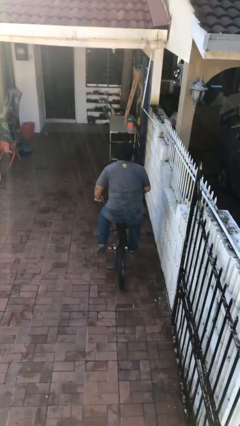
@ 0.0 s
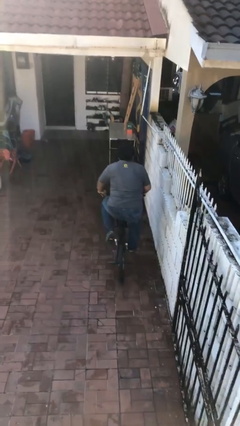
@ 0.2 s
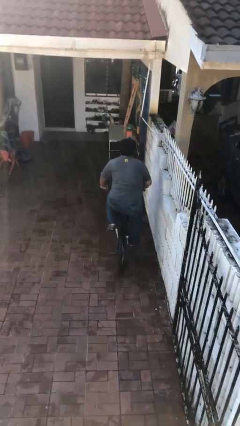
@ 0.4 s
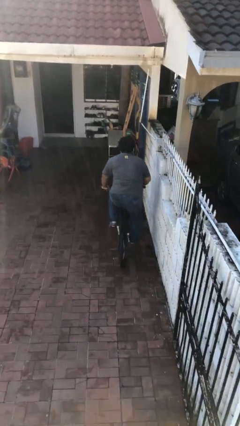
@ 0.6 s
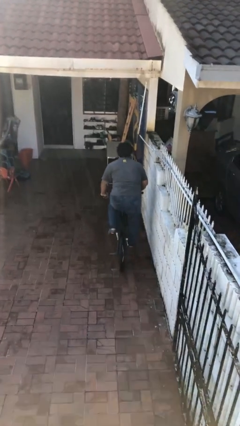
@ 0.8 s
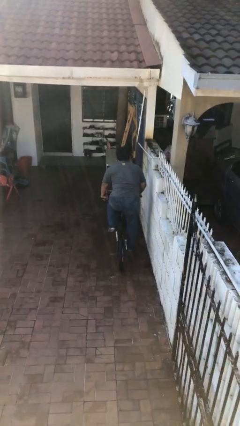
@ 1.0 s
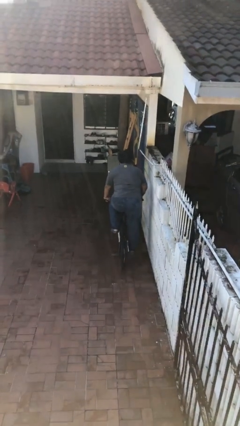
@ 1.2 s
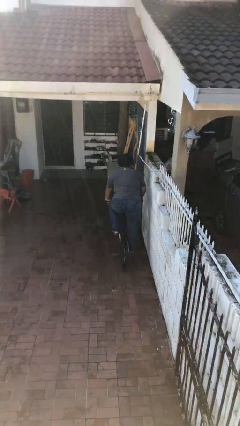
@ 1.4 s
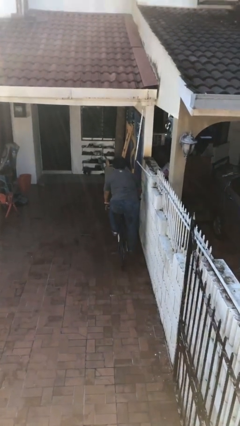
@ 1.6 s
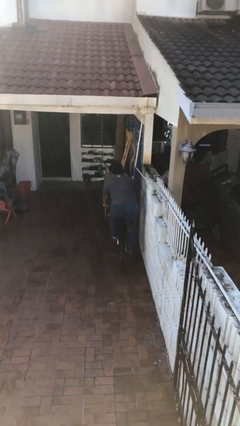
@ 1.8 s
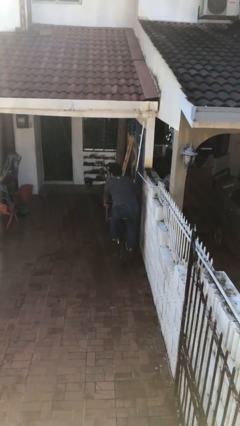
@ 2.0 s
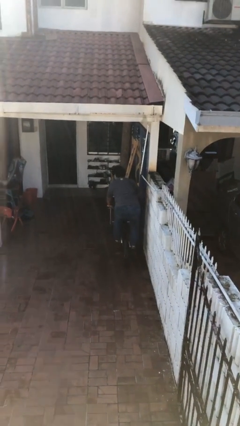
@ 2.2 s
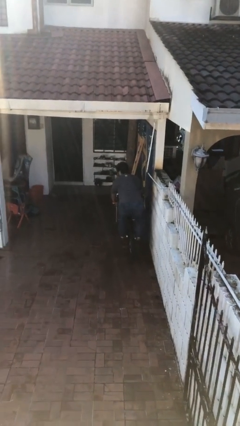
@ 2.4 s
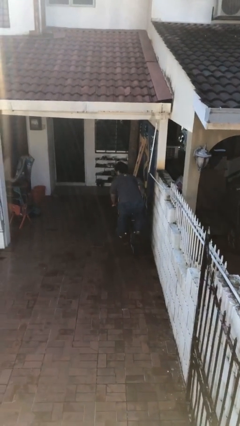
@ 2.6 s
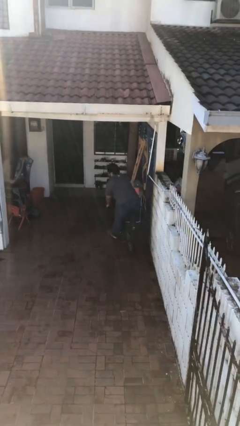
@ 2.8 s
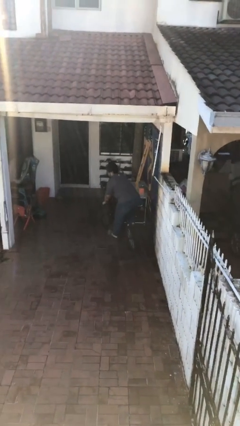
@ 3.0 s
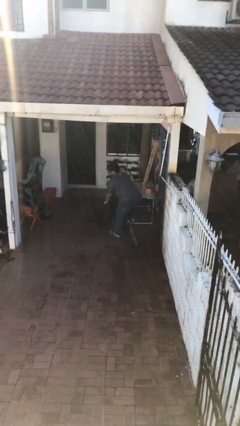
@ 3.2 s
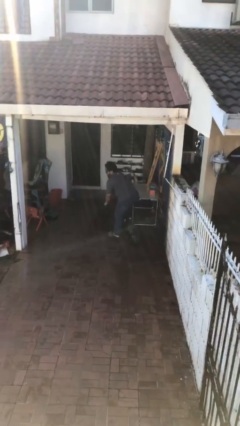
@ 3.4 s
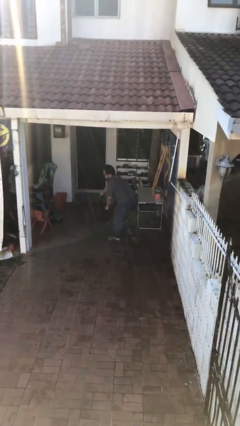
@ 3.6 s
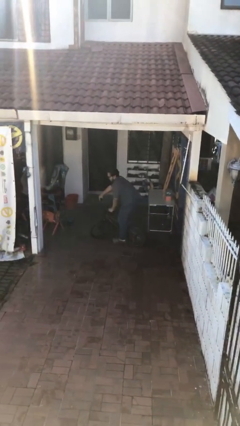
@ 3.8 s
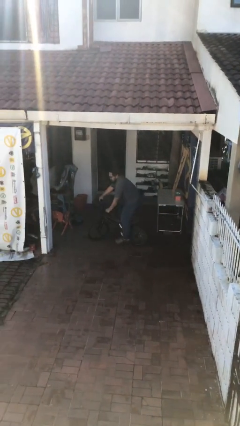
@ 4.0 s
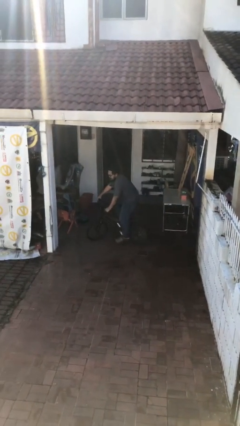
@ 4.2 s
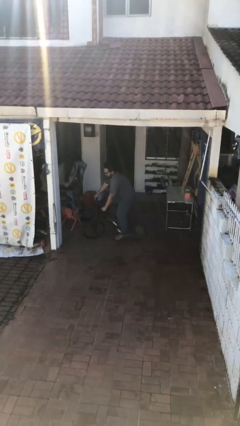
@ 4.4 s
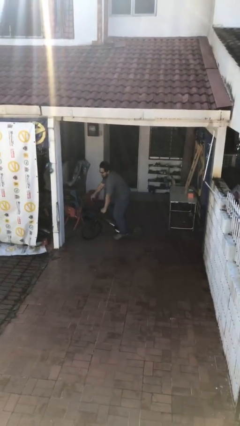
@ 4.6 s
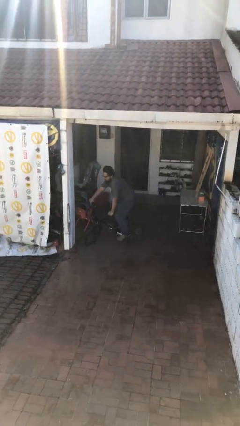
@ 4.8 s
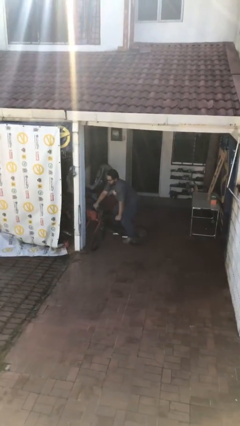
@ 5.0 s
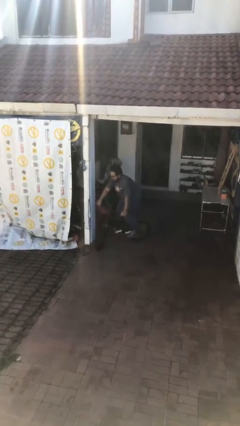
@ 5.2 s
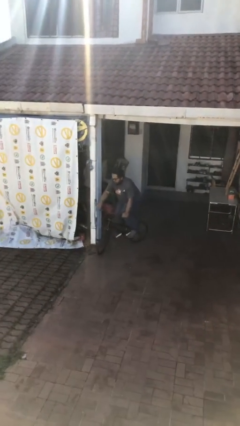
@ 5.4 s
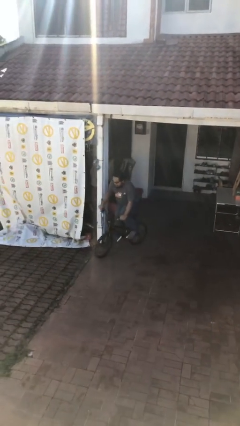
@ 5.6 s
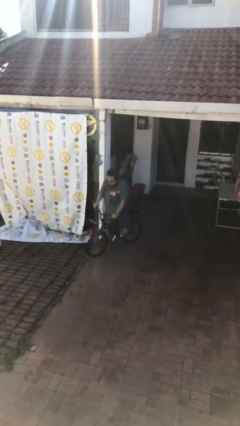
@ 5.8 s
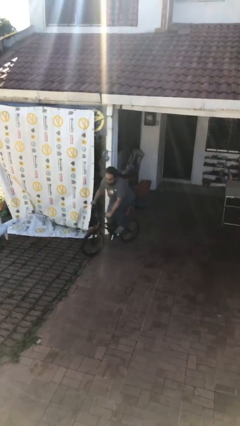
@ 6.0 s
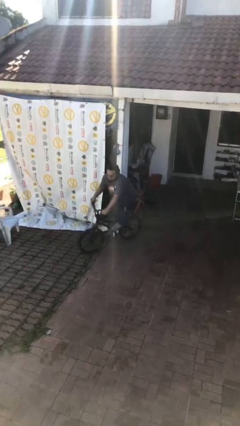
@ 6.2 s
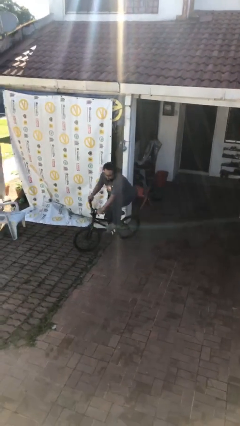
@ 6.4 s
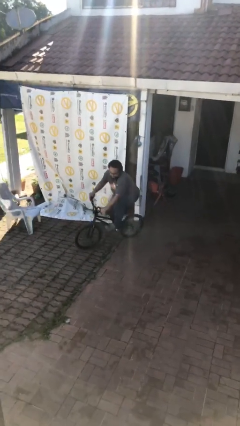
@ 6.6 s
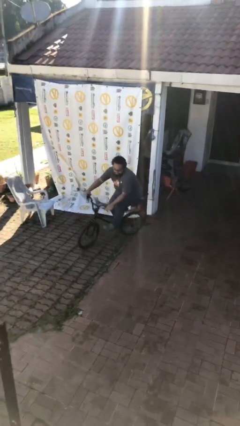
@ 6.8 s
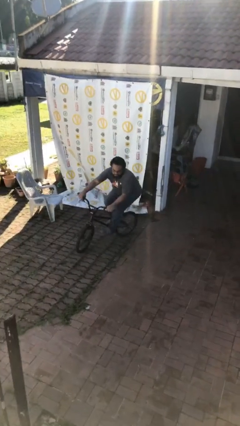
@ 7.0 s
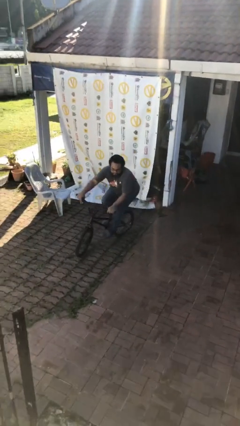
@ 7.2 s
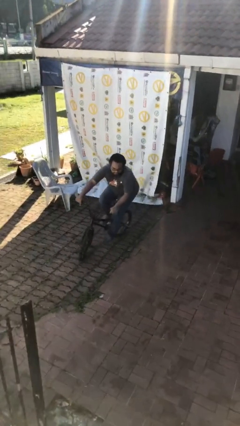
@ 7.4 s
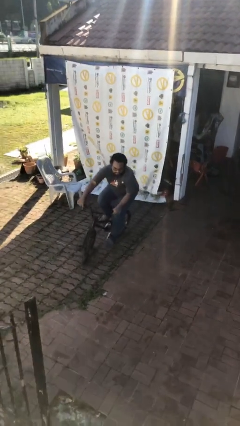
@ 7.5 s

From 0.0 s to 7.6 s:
person rides bicycle

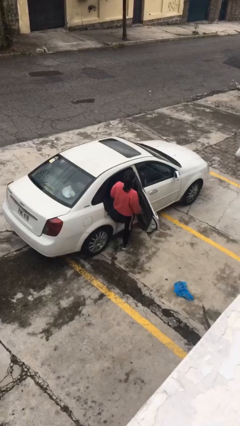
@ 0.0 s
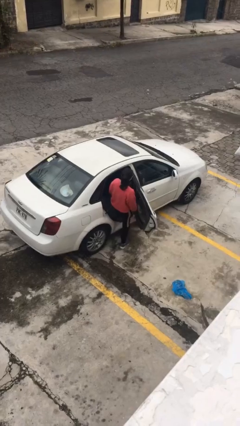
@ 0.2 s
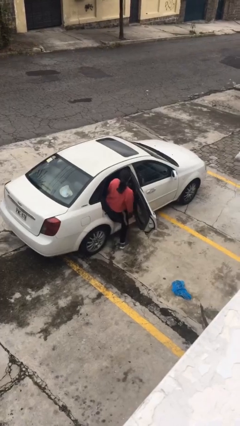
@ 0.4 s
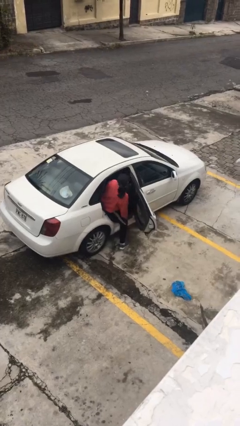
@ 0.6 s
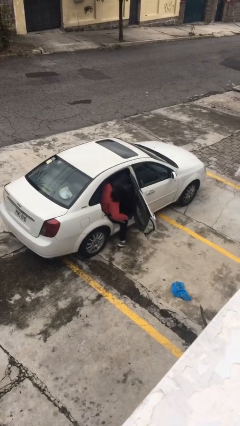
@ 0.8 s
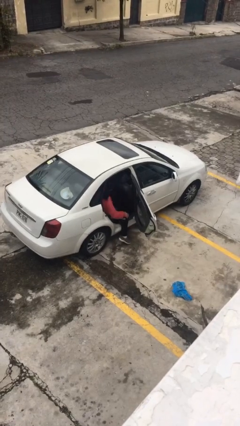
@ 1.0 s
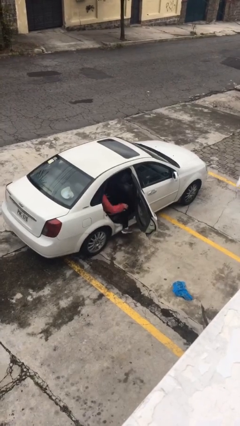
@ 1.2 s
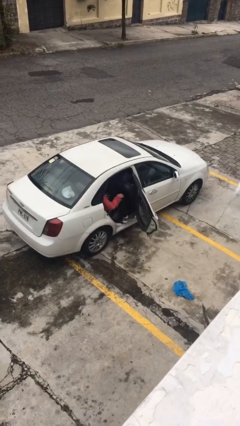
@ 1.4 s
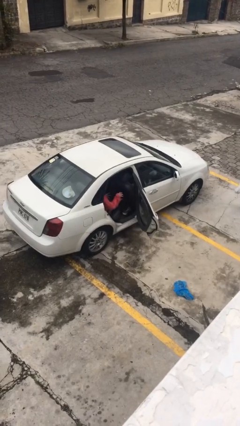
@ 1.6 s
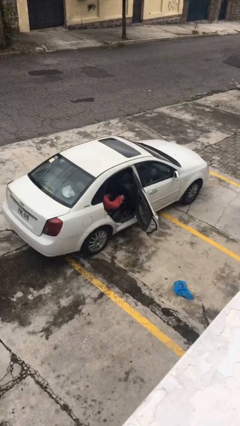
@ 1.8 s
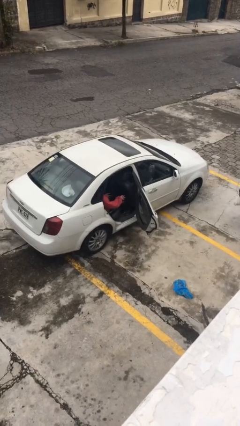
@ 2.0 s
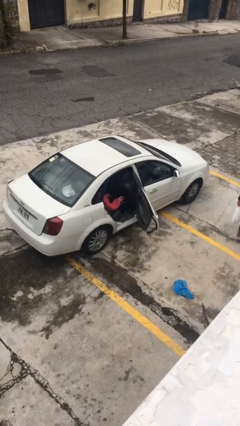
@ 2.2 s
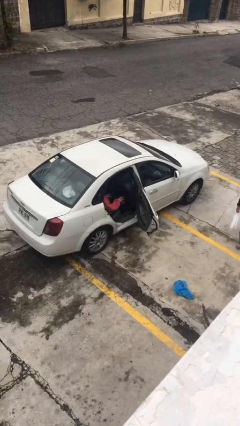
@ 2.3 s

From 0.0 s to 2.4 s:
person enters car

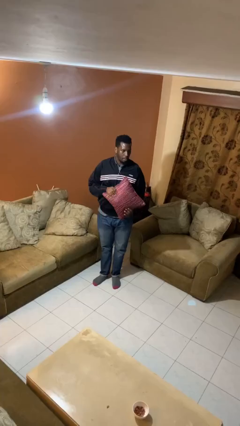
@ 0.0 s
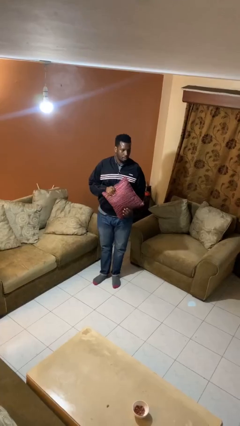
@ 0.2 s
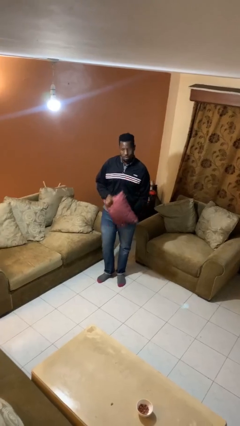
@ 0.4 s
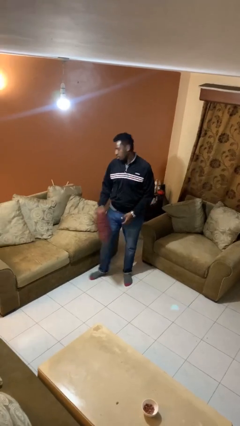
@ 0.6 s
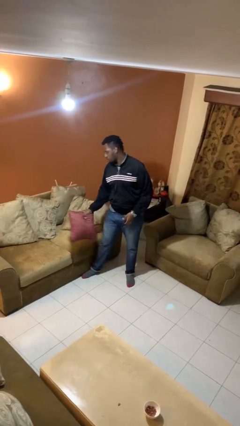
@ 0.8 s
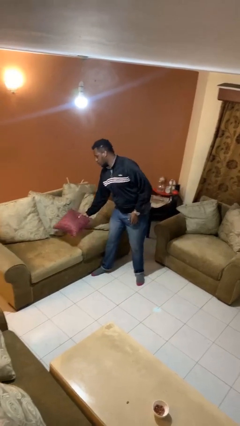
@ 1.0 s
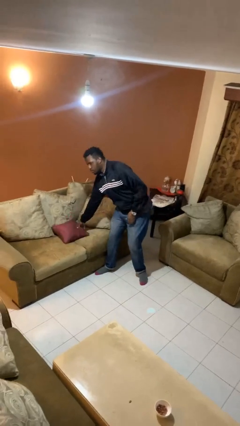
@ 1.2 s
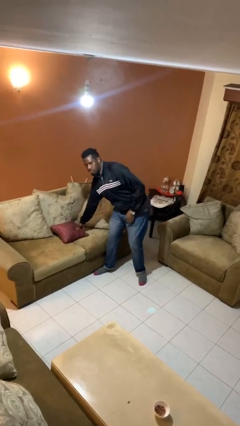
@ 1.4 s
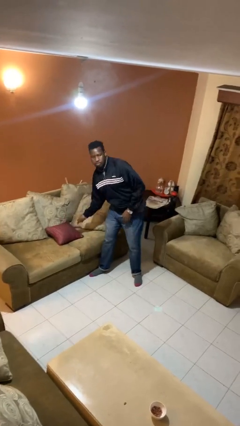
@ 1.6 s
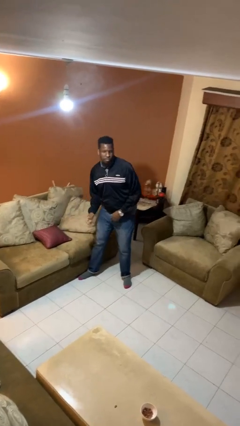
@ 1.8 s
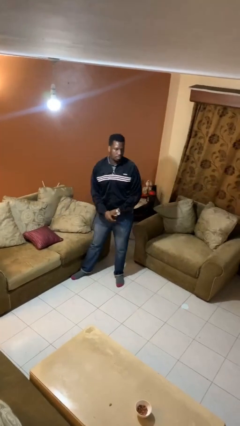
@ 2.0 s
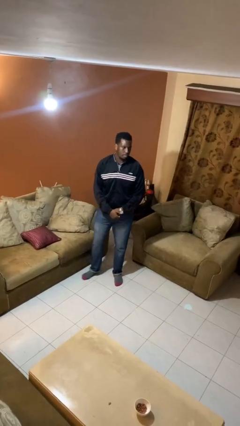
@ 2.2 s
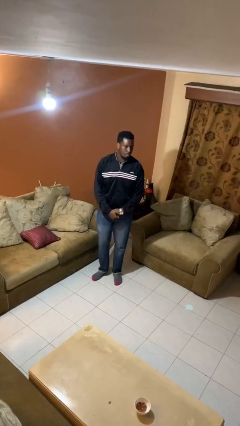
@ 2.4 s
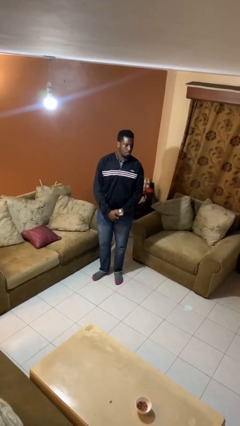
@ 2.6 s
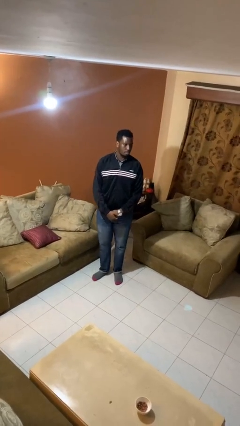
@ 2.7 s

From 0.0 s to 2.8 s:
person puts down object on couch

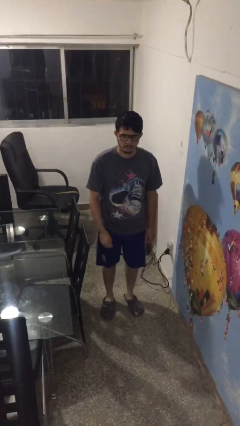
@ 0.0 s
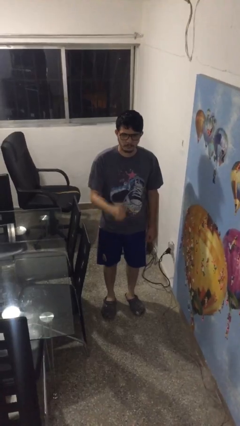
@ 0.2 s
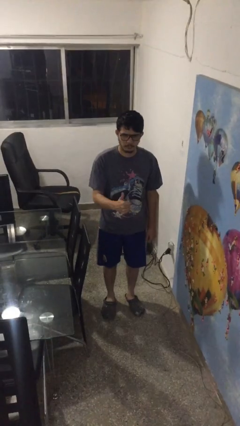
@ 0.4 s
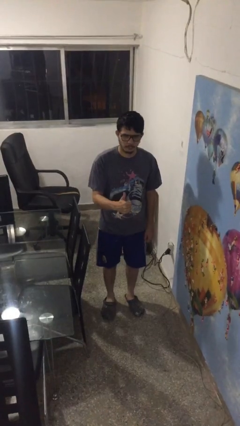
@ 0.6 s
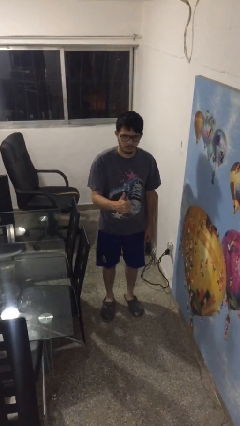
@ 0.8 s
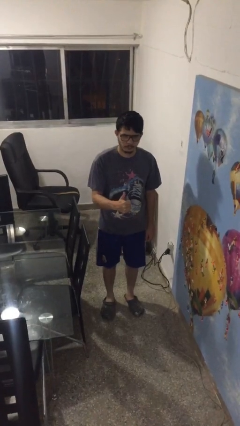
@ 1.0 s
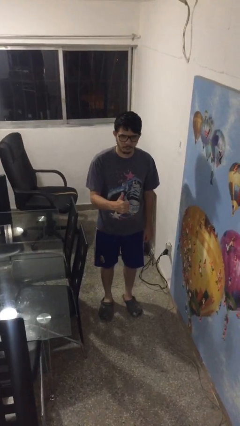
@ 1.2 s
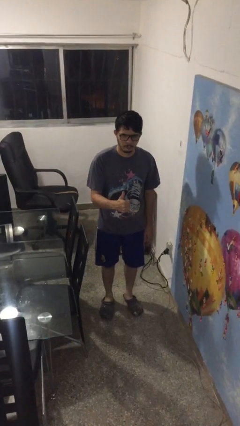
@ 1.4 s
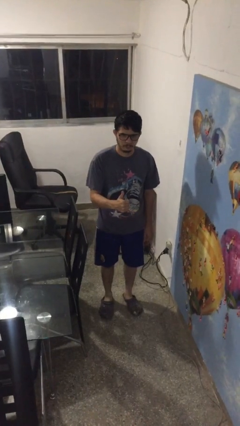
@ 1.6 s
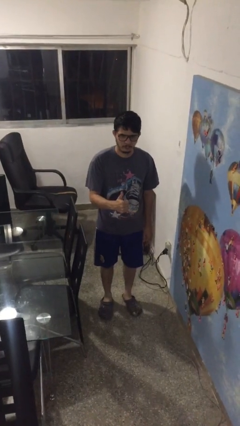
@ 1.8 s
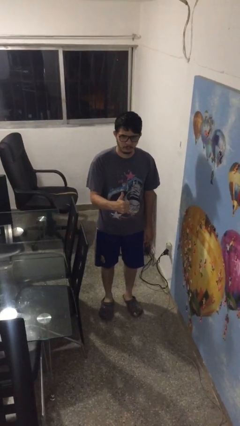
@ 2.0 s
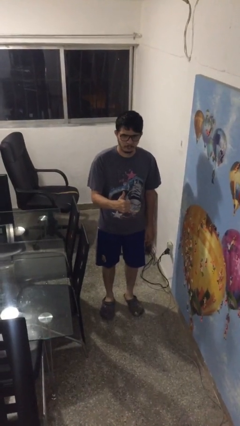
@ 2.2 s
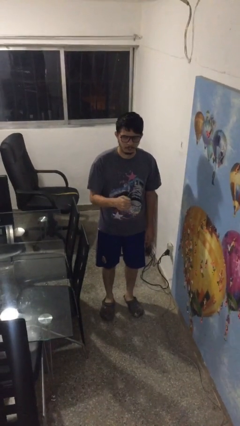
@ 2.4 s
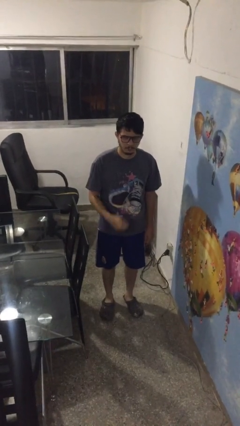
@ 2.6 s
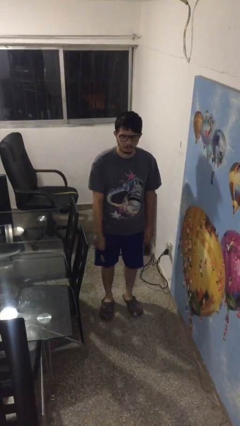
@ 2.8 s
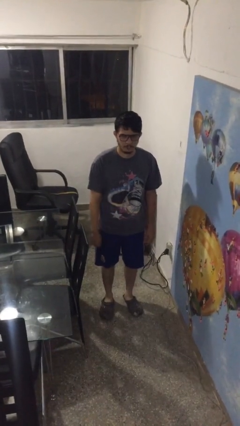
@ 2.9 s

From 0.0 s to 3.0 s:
person gestures thumbs up

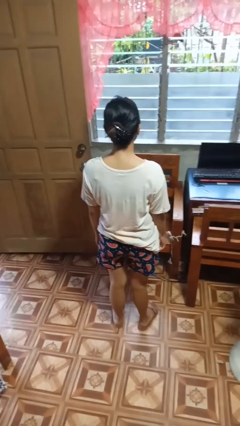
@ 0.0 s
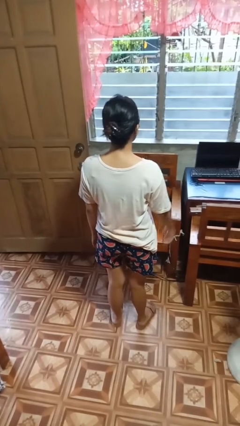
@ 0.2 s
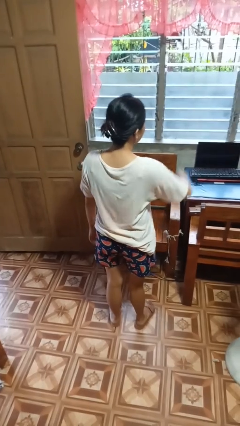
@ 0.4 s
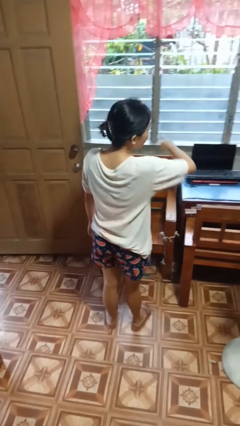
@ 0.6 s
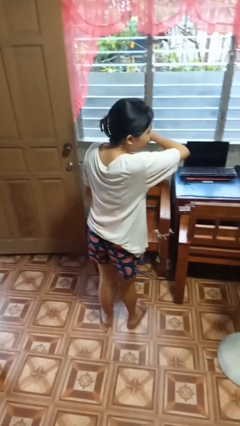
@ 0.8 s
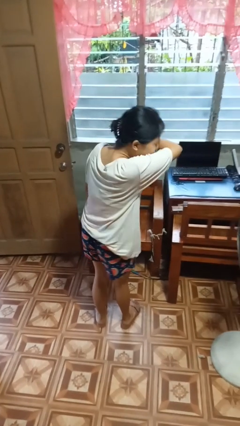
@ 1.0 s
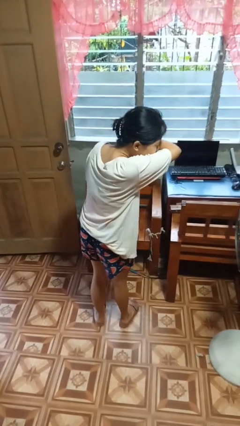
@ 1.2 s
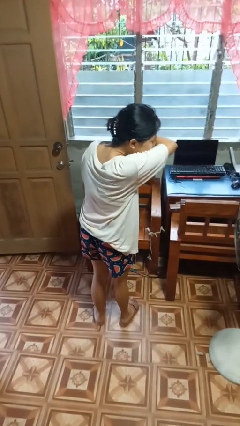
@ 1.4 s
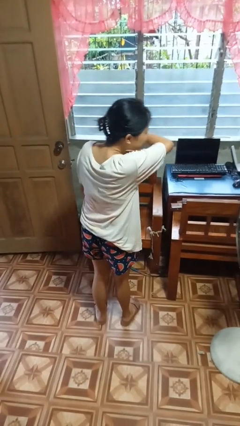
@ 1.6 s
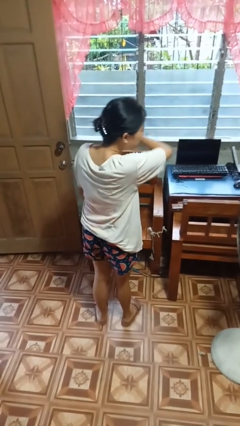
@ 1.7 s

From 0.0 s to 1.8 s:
person sneezes into arm
